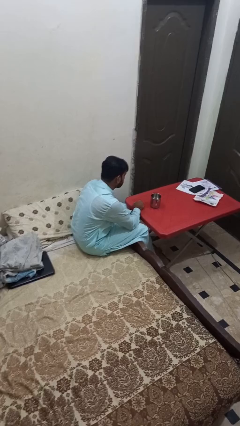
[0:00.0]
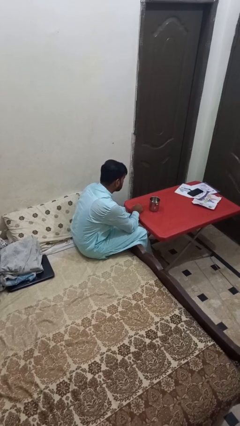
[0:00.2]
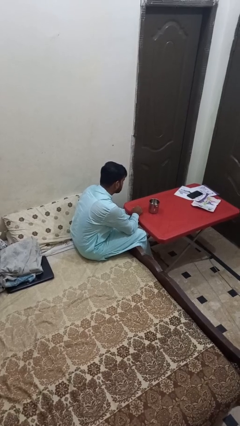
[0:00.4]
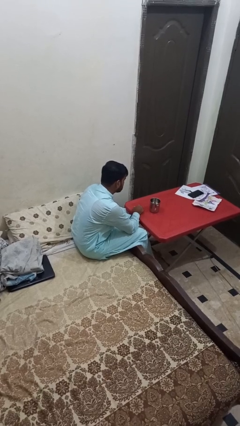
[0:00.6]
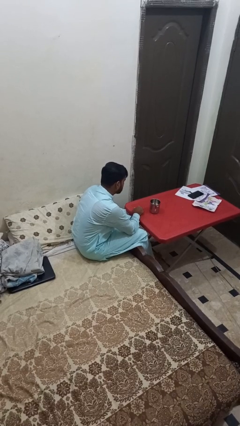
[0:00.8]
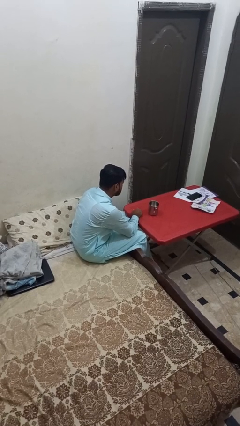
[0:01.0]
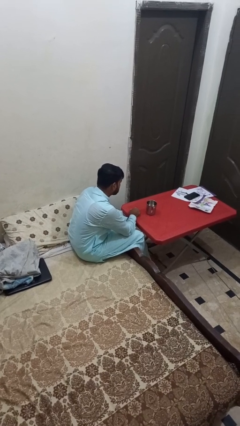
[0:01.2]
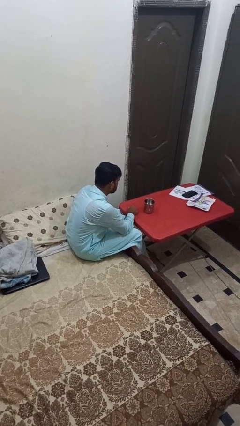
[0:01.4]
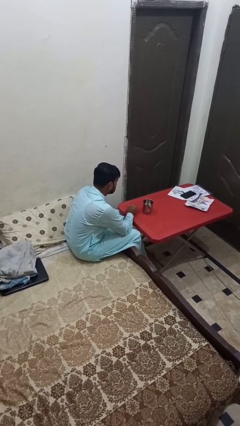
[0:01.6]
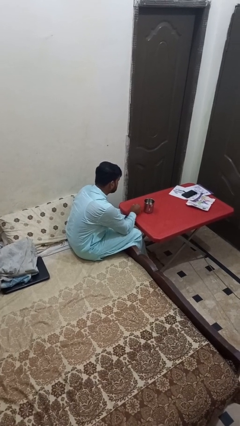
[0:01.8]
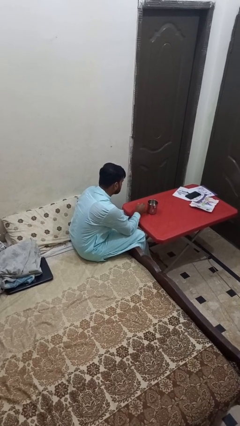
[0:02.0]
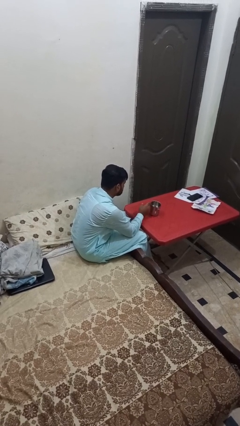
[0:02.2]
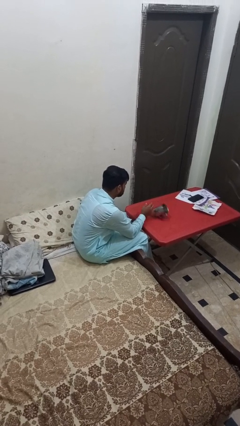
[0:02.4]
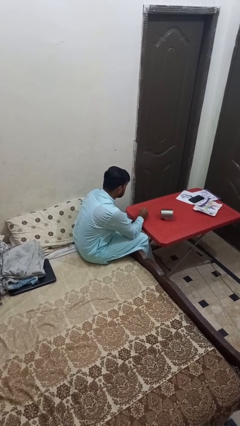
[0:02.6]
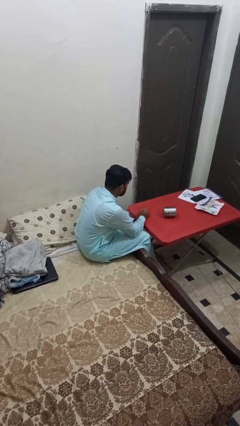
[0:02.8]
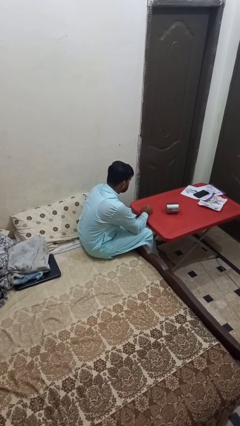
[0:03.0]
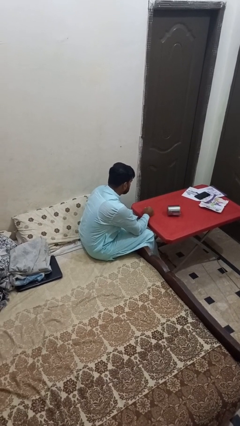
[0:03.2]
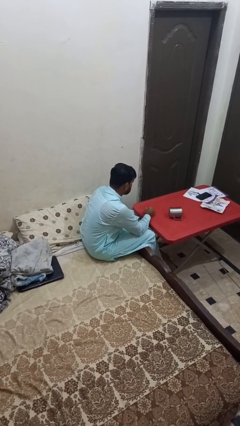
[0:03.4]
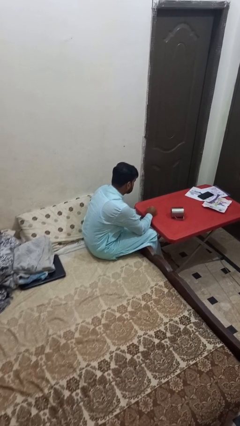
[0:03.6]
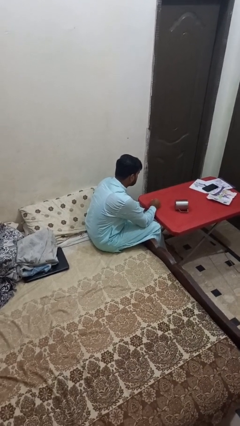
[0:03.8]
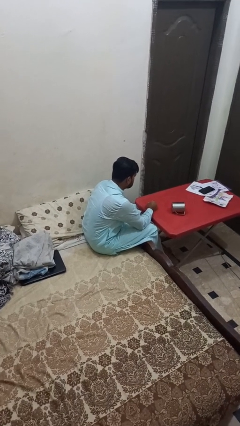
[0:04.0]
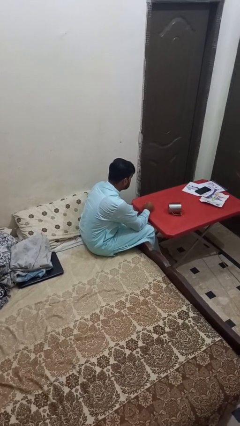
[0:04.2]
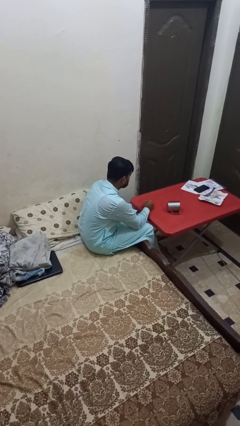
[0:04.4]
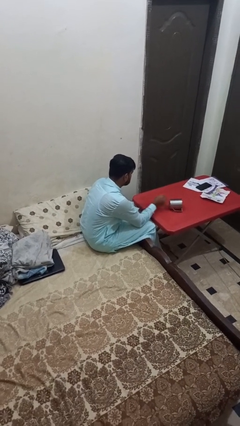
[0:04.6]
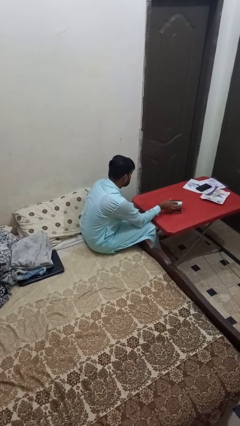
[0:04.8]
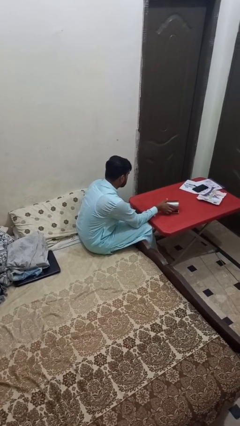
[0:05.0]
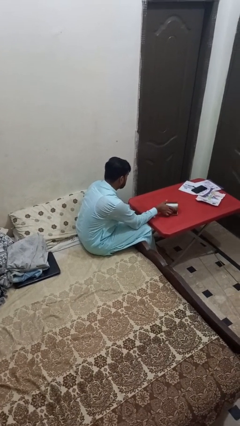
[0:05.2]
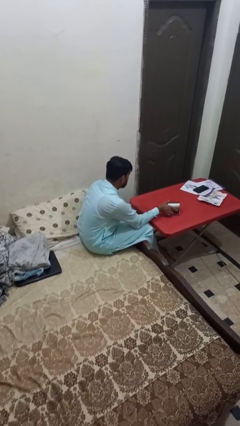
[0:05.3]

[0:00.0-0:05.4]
person knocks over glass

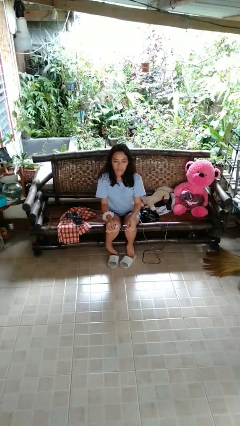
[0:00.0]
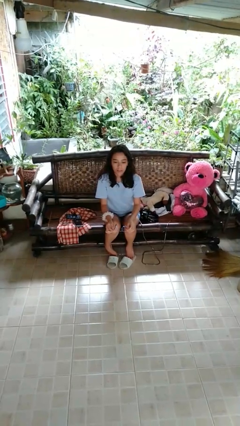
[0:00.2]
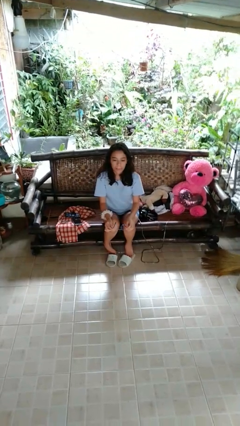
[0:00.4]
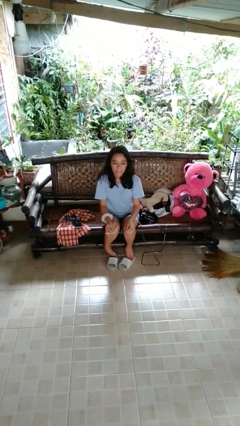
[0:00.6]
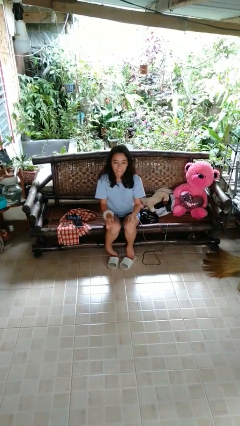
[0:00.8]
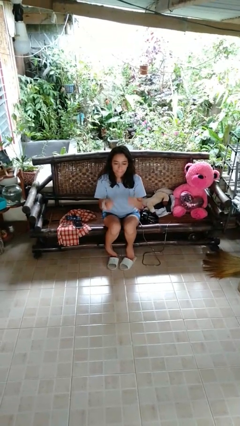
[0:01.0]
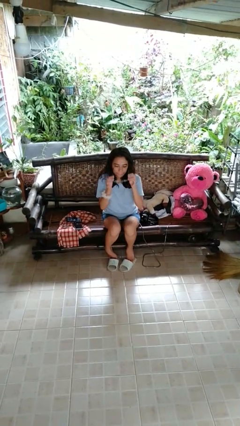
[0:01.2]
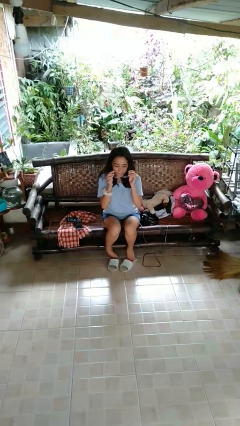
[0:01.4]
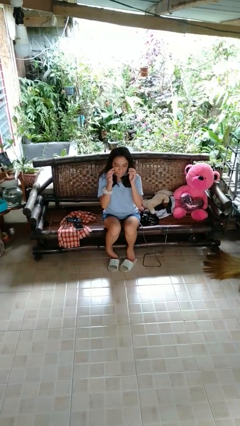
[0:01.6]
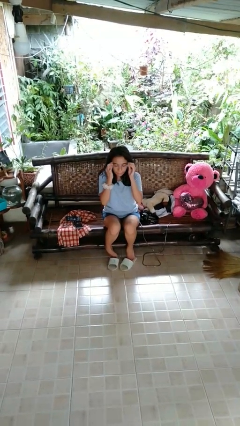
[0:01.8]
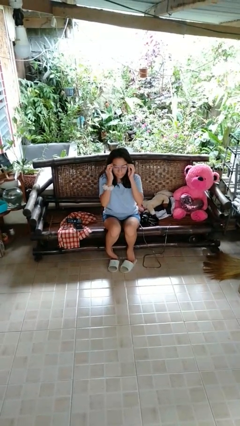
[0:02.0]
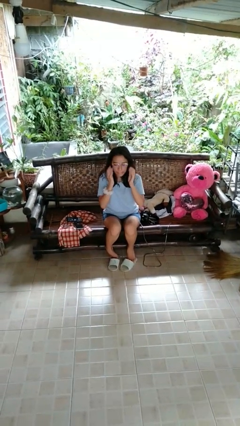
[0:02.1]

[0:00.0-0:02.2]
person grabs person by forearm

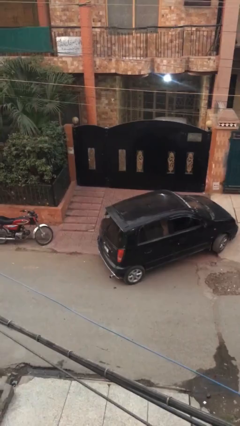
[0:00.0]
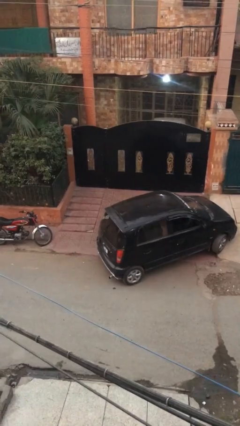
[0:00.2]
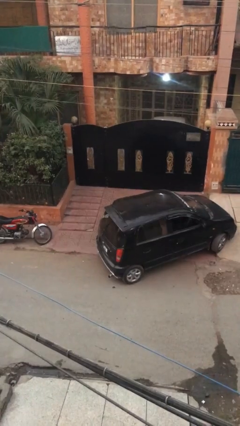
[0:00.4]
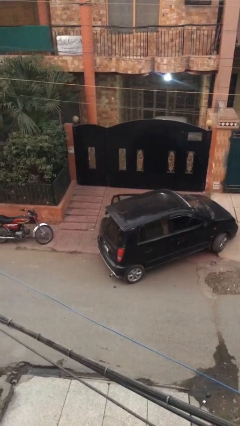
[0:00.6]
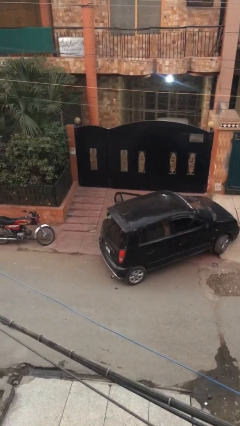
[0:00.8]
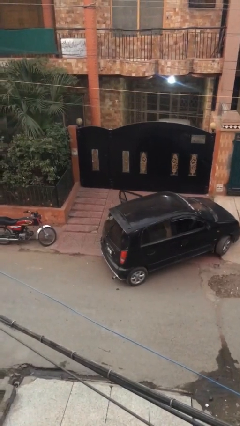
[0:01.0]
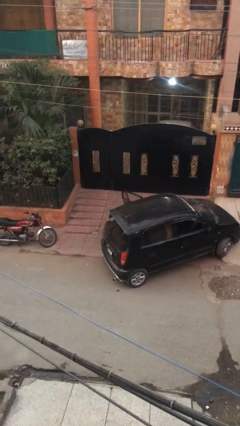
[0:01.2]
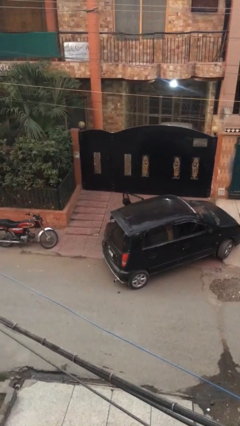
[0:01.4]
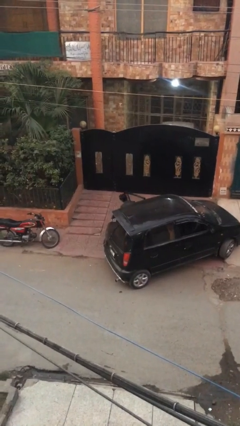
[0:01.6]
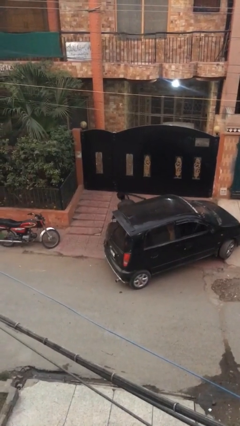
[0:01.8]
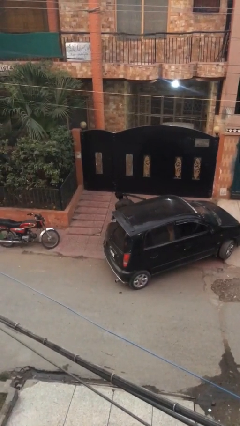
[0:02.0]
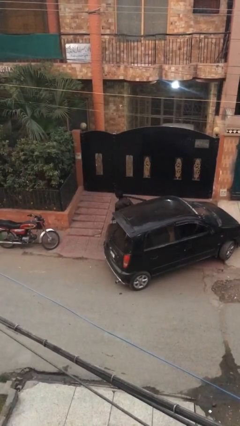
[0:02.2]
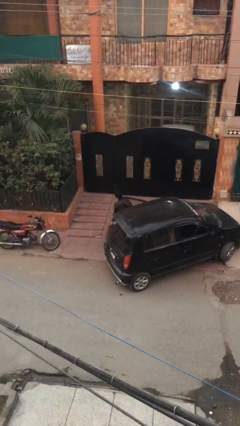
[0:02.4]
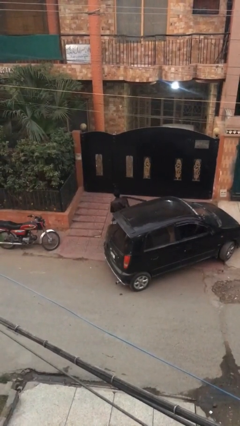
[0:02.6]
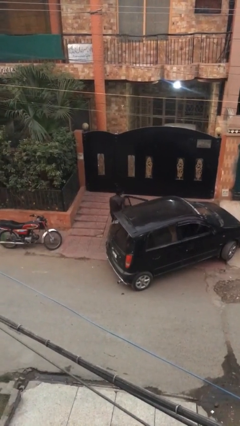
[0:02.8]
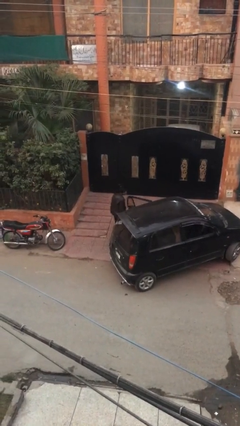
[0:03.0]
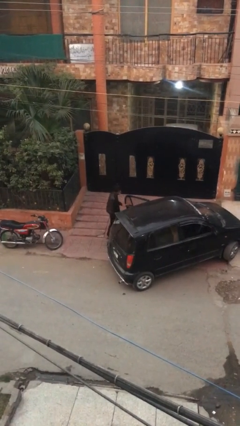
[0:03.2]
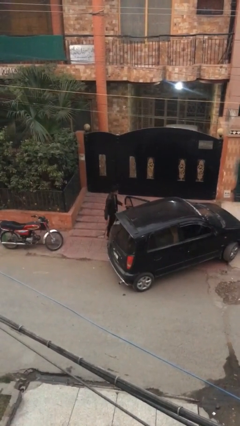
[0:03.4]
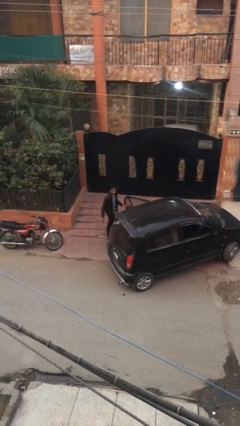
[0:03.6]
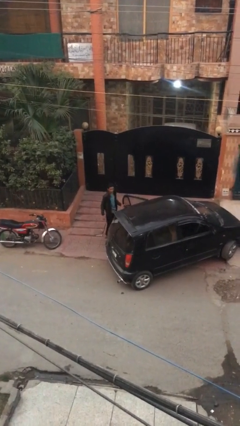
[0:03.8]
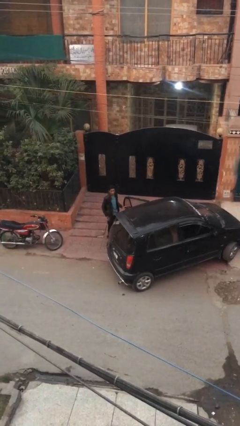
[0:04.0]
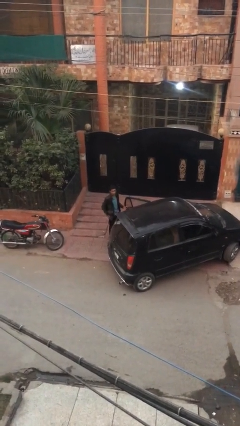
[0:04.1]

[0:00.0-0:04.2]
person exits car

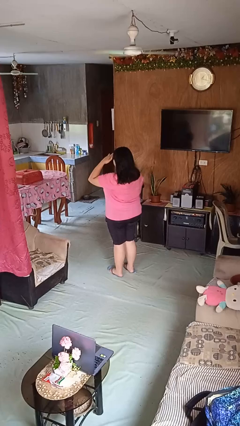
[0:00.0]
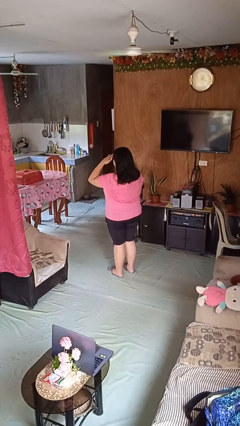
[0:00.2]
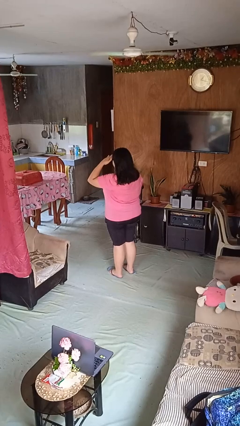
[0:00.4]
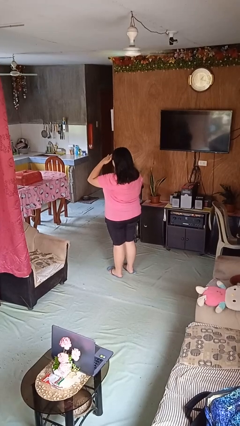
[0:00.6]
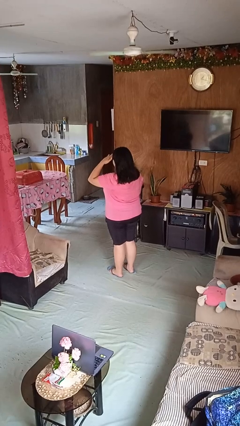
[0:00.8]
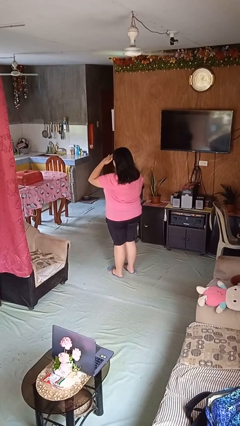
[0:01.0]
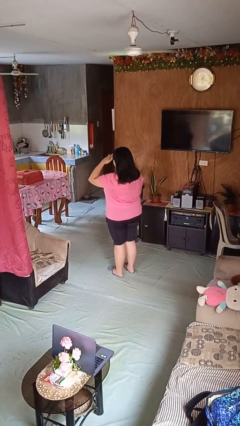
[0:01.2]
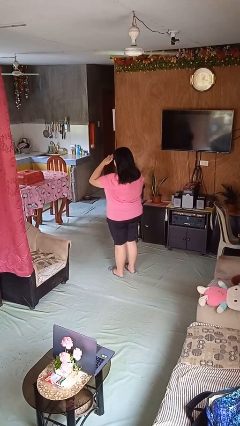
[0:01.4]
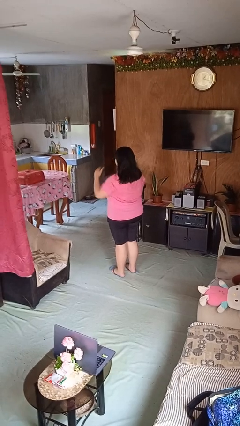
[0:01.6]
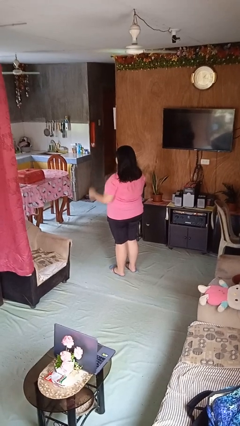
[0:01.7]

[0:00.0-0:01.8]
person salutes

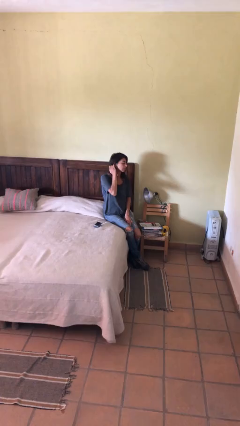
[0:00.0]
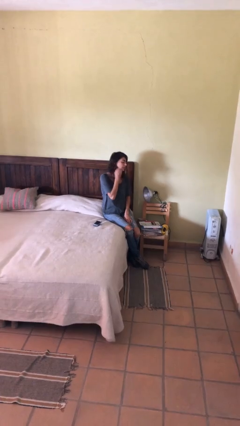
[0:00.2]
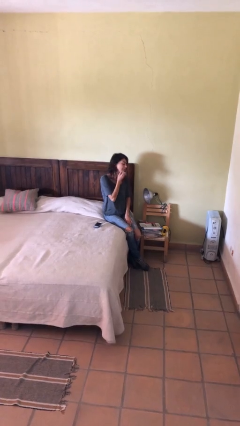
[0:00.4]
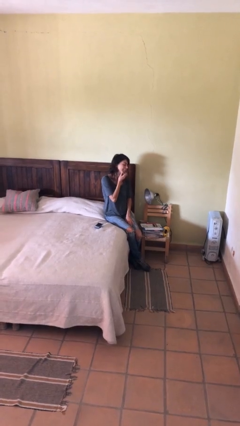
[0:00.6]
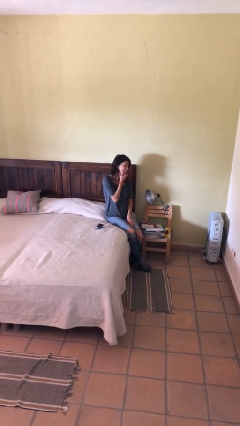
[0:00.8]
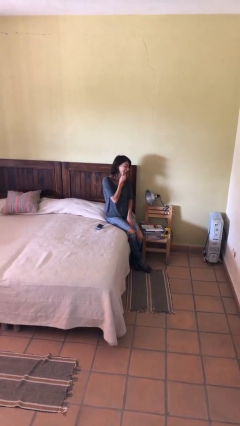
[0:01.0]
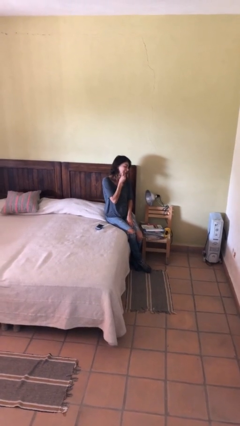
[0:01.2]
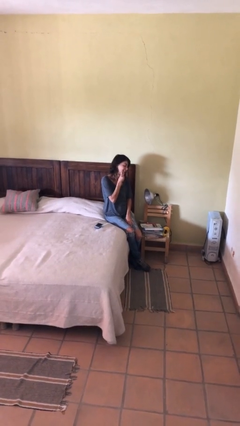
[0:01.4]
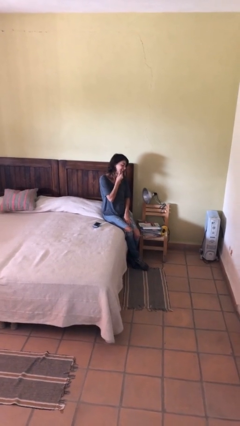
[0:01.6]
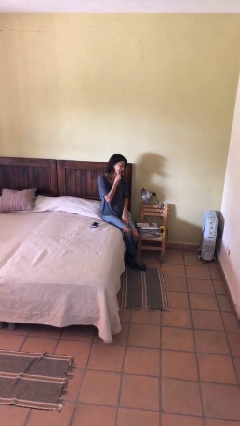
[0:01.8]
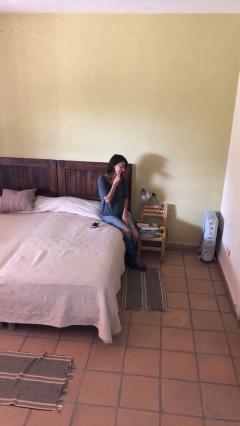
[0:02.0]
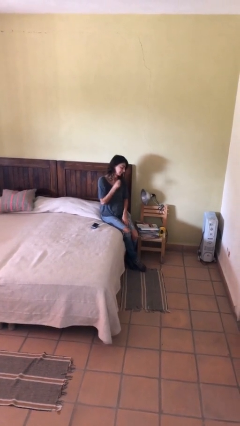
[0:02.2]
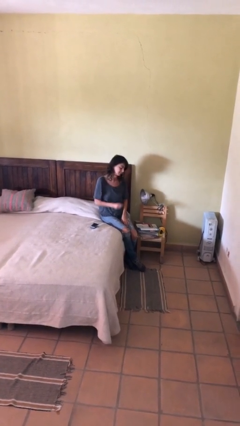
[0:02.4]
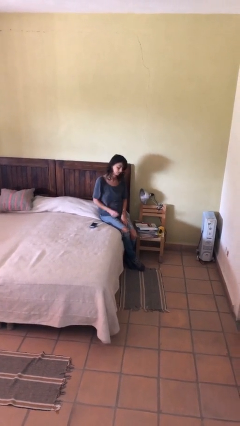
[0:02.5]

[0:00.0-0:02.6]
person strokes chin

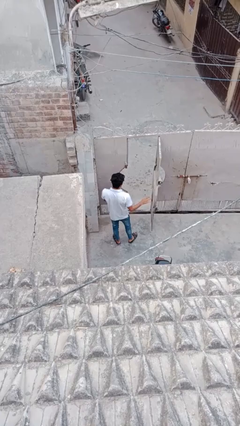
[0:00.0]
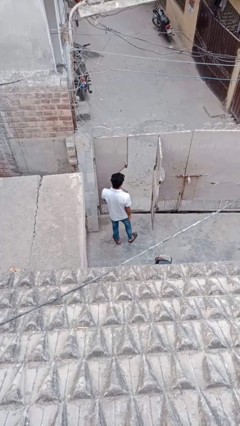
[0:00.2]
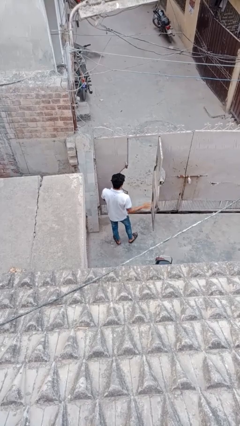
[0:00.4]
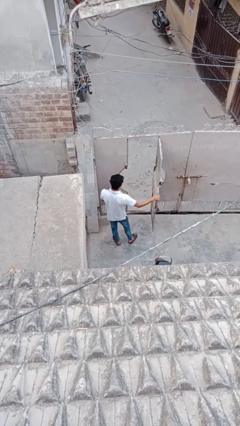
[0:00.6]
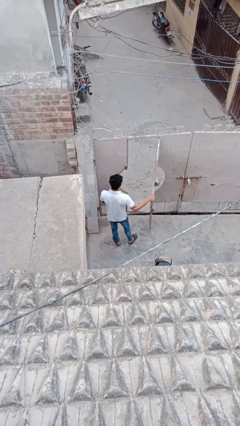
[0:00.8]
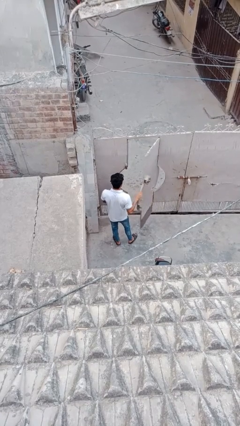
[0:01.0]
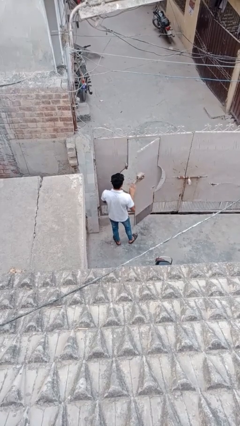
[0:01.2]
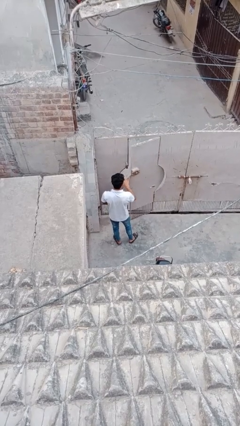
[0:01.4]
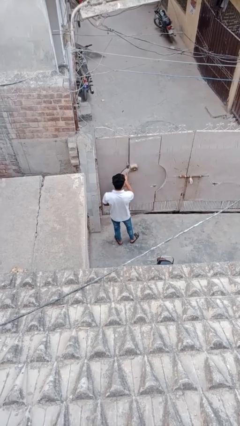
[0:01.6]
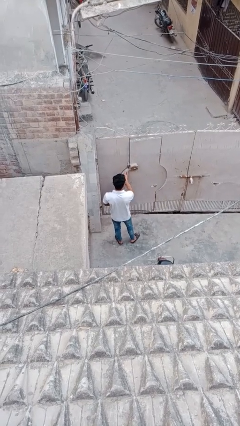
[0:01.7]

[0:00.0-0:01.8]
person closes facility door
